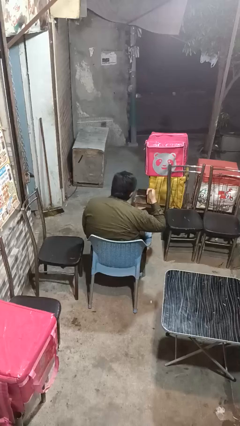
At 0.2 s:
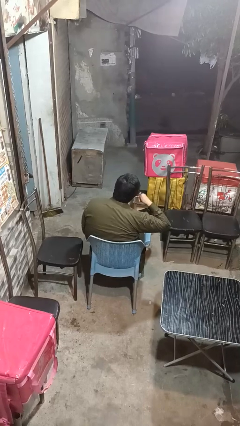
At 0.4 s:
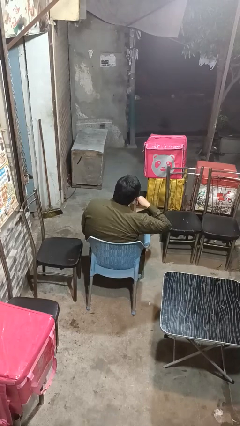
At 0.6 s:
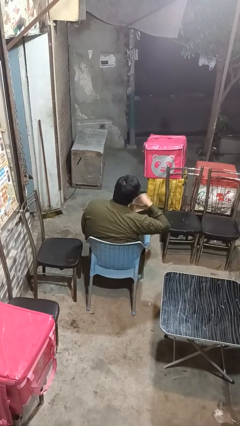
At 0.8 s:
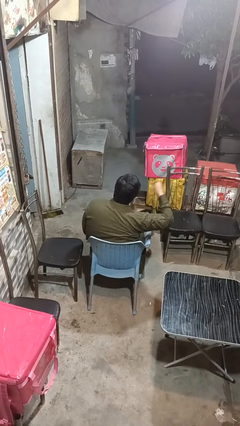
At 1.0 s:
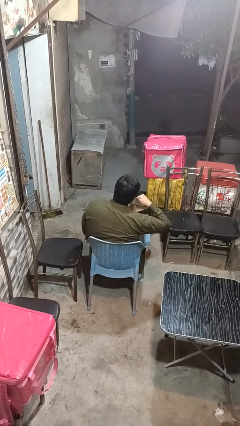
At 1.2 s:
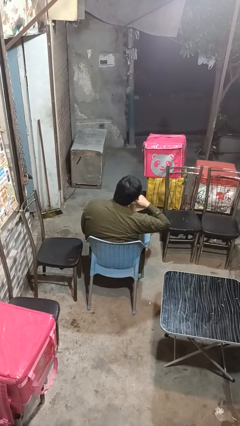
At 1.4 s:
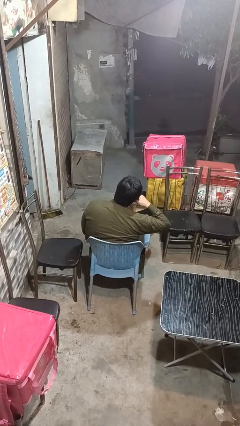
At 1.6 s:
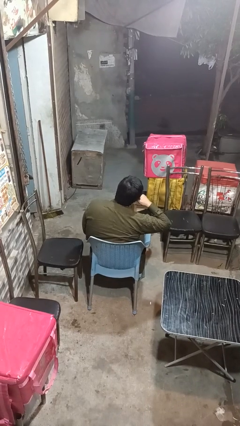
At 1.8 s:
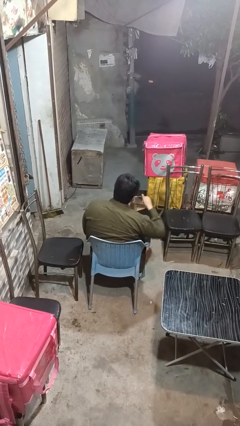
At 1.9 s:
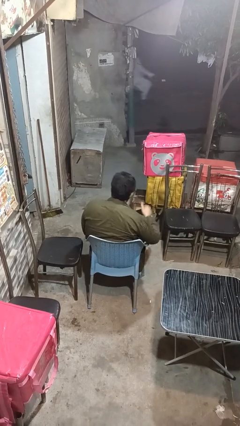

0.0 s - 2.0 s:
person gestures call me

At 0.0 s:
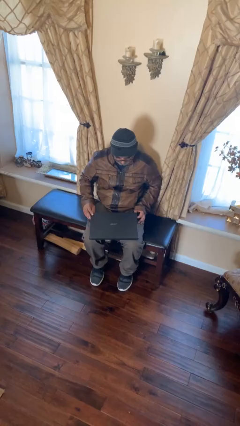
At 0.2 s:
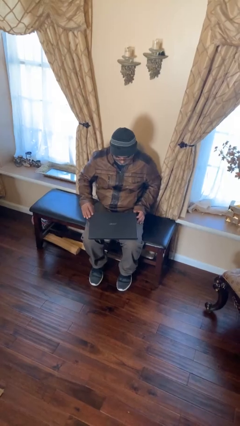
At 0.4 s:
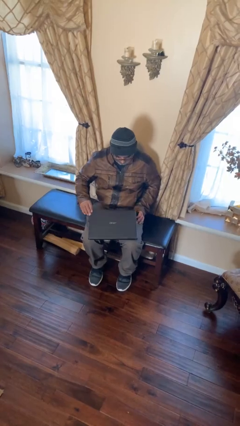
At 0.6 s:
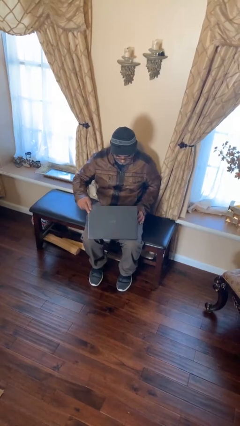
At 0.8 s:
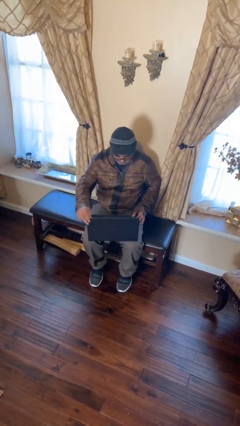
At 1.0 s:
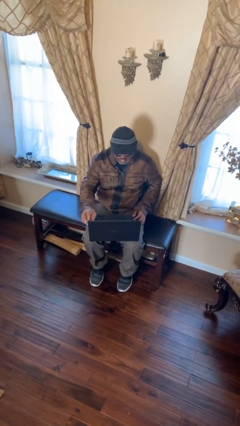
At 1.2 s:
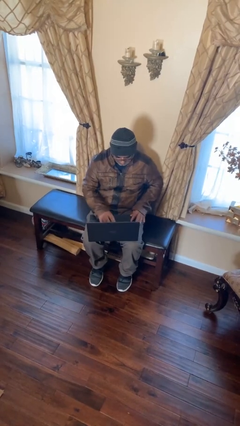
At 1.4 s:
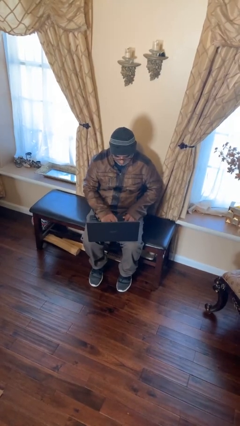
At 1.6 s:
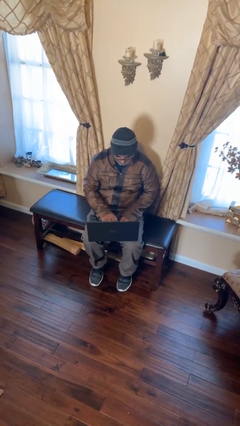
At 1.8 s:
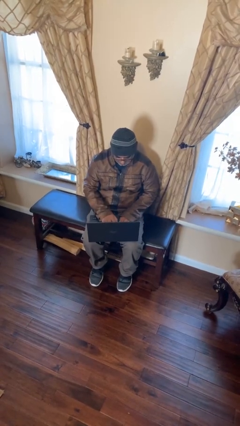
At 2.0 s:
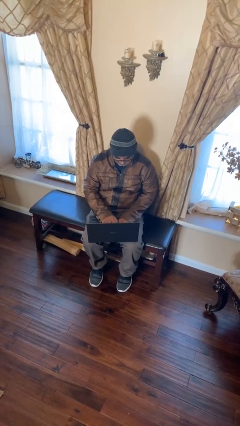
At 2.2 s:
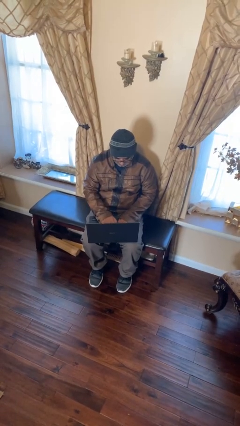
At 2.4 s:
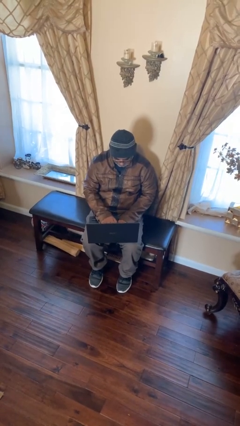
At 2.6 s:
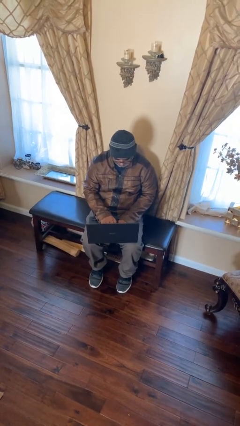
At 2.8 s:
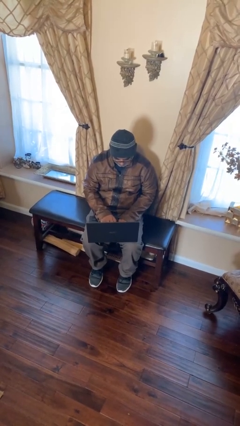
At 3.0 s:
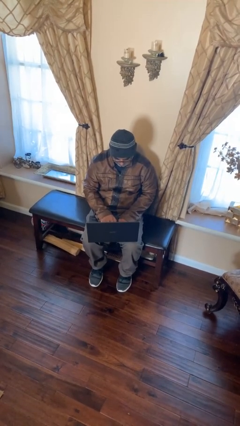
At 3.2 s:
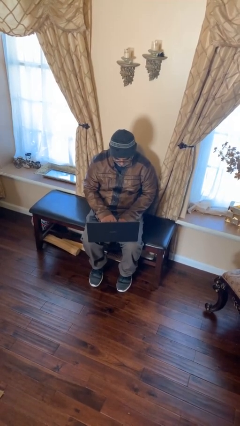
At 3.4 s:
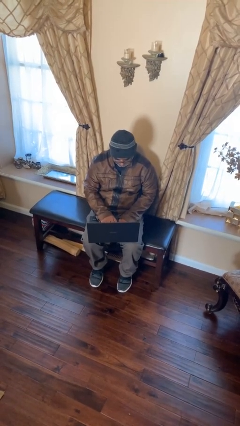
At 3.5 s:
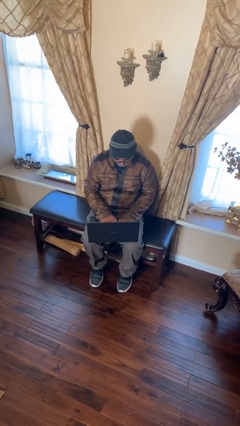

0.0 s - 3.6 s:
person interacts with laptop

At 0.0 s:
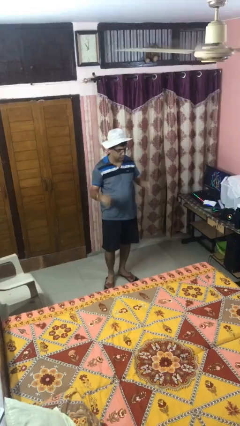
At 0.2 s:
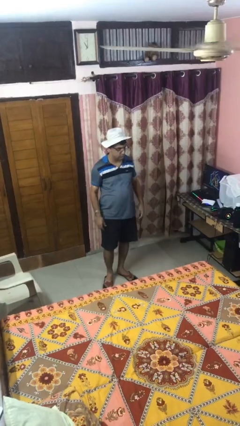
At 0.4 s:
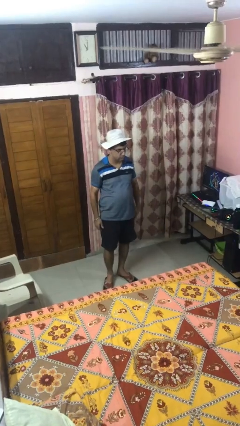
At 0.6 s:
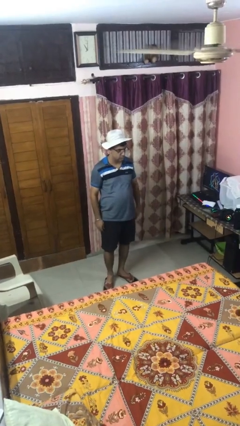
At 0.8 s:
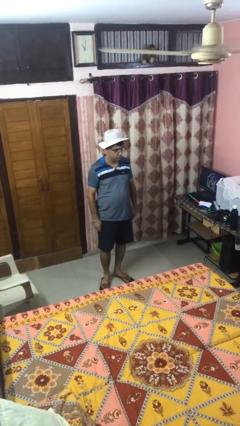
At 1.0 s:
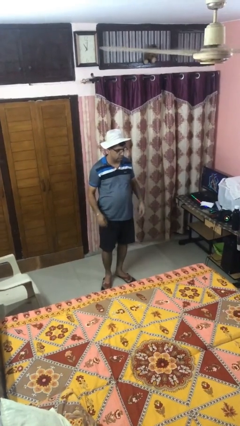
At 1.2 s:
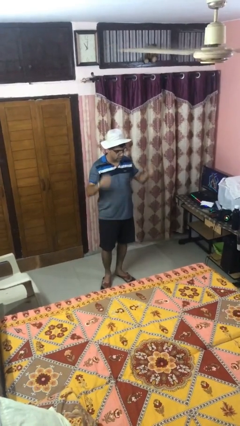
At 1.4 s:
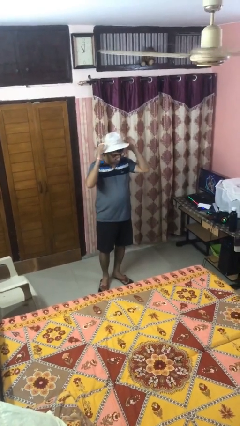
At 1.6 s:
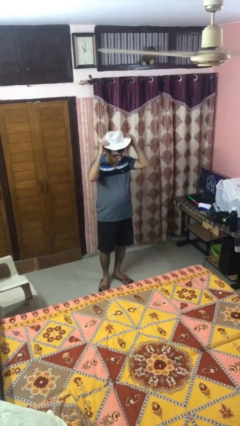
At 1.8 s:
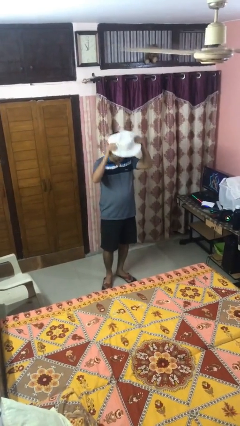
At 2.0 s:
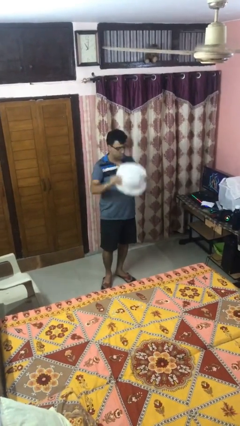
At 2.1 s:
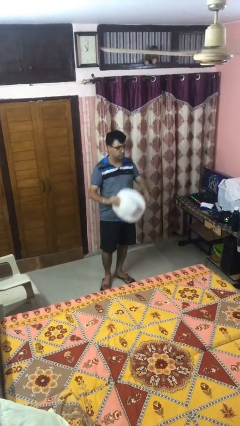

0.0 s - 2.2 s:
person takes off hat

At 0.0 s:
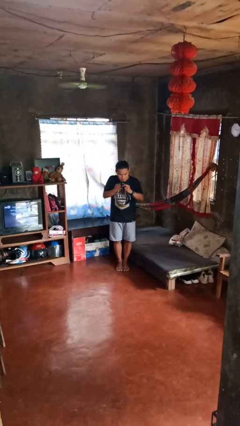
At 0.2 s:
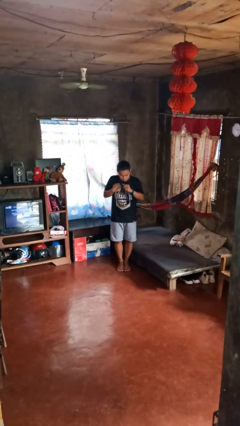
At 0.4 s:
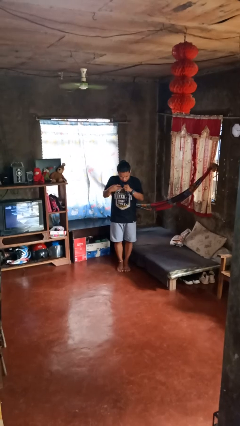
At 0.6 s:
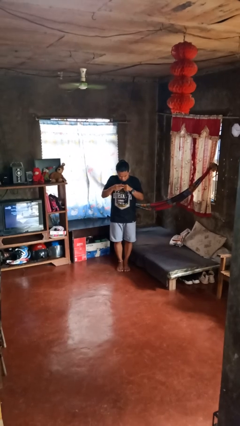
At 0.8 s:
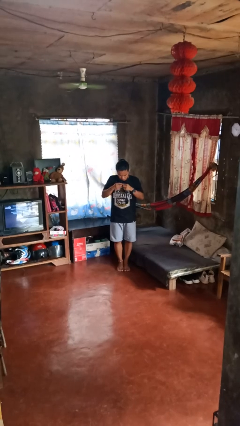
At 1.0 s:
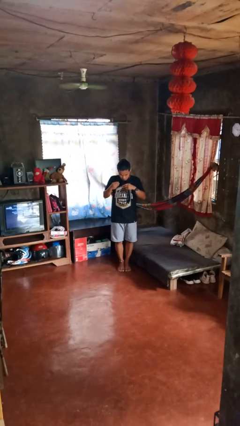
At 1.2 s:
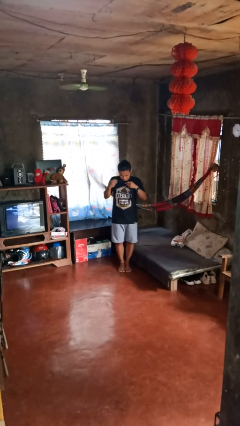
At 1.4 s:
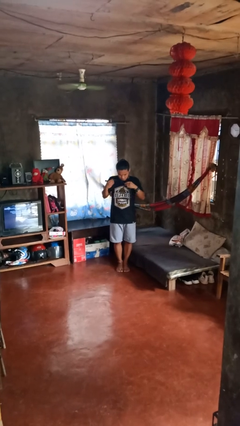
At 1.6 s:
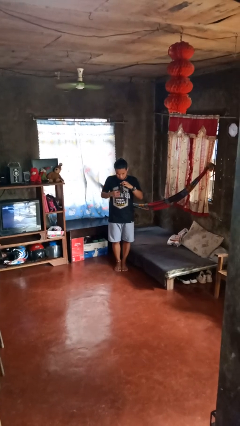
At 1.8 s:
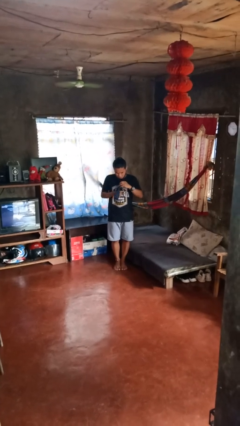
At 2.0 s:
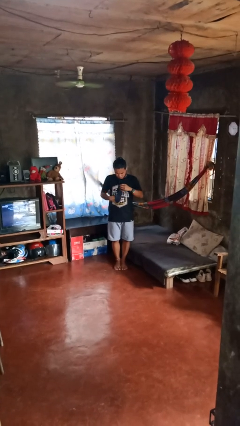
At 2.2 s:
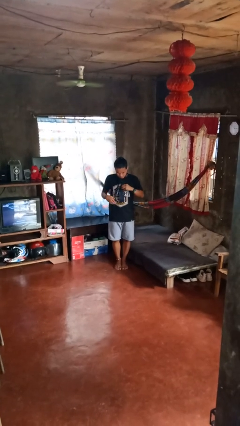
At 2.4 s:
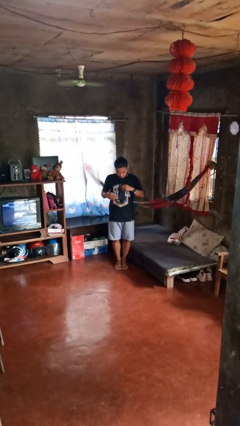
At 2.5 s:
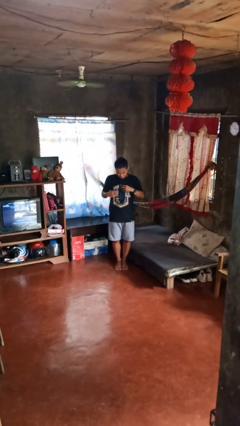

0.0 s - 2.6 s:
person dries hair with hairdryer

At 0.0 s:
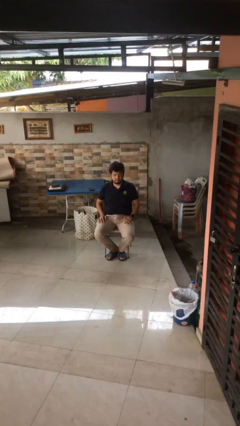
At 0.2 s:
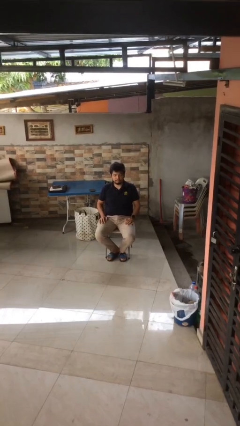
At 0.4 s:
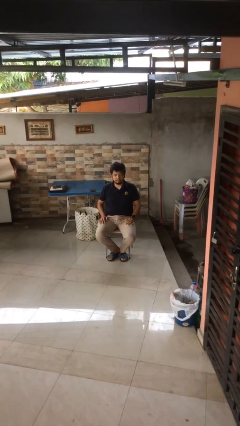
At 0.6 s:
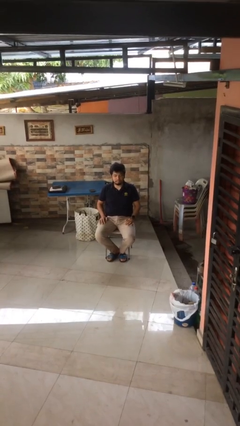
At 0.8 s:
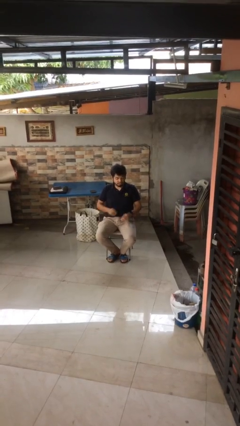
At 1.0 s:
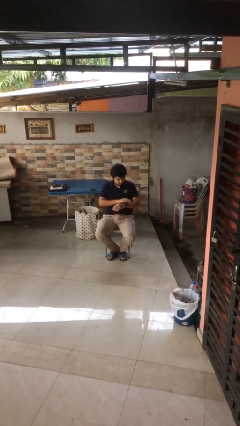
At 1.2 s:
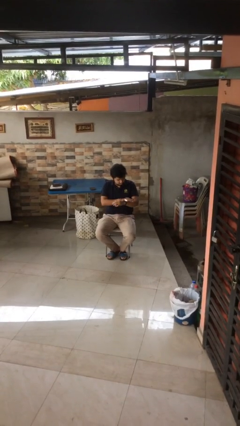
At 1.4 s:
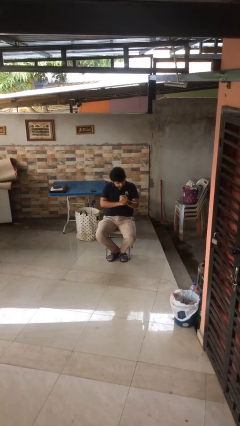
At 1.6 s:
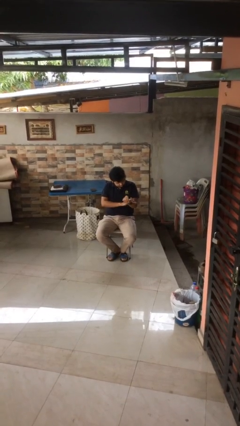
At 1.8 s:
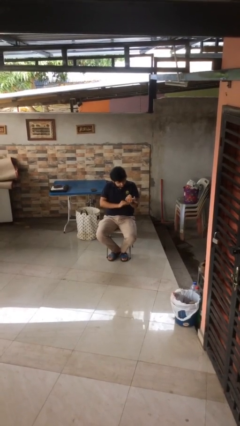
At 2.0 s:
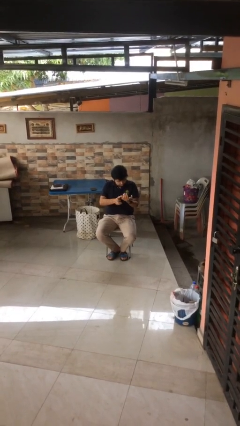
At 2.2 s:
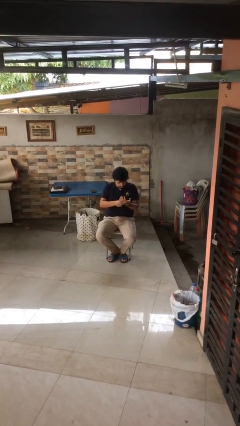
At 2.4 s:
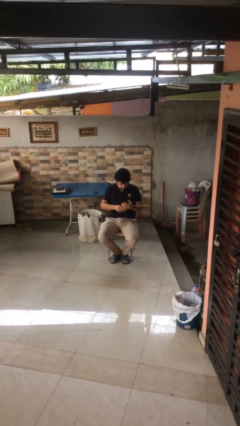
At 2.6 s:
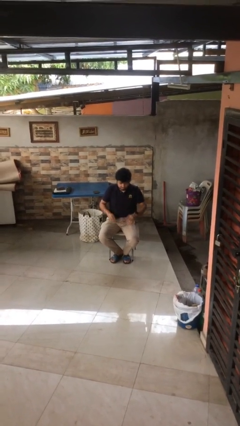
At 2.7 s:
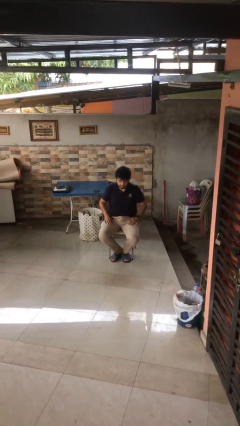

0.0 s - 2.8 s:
person looks at hands in lap

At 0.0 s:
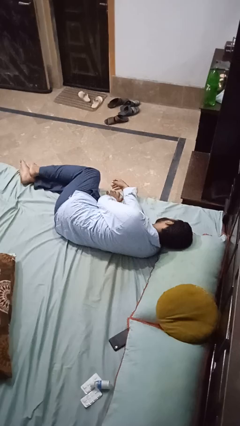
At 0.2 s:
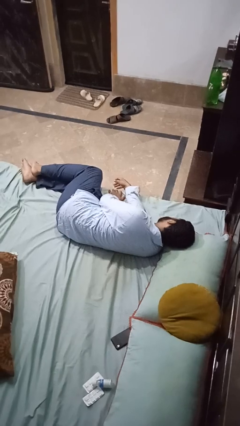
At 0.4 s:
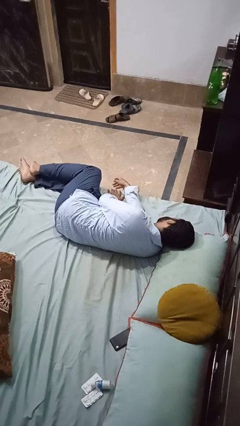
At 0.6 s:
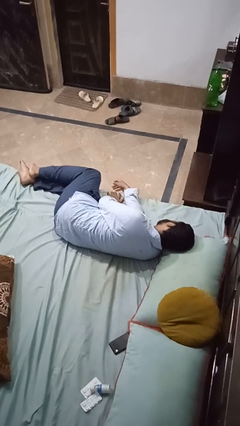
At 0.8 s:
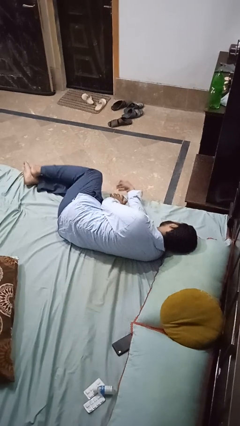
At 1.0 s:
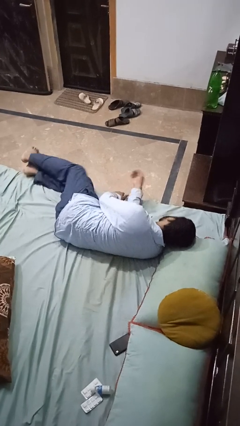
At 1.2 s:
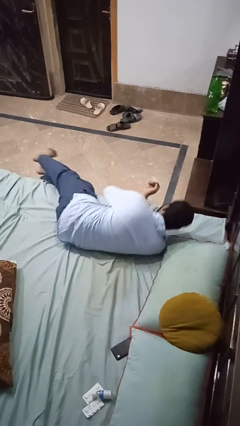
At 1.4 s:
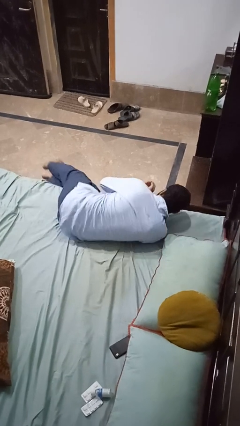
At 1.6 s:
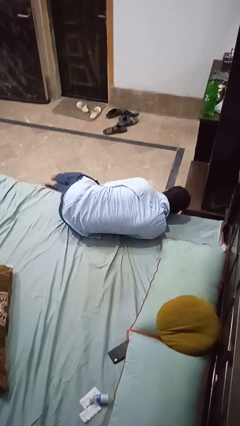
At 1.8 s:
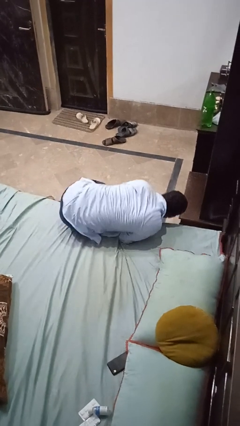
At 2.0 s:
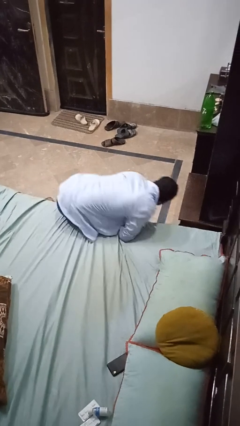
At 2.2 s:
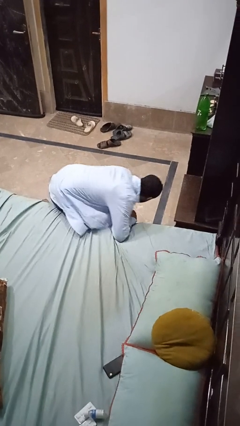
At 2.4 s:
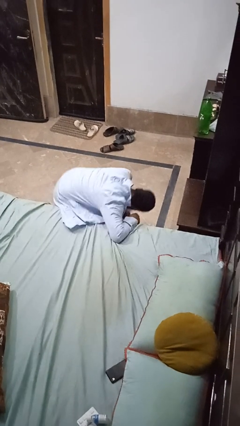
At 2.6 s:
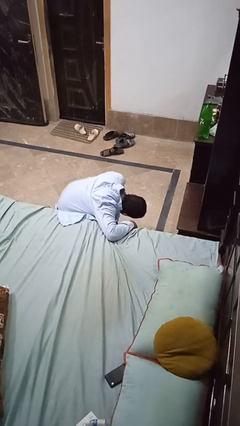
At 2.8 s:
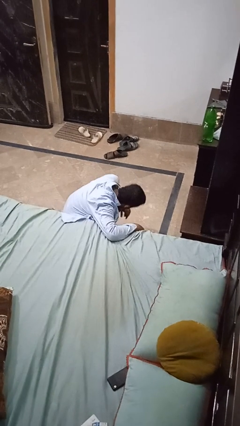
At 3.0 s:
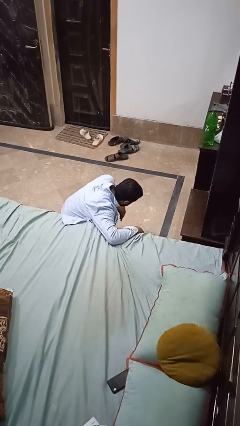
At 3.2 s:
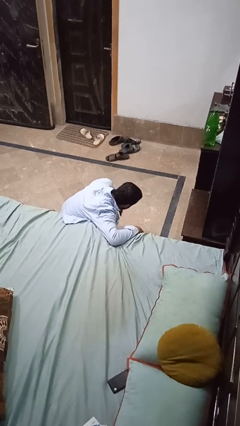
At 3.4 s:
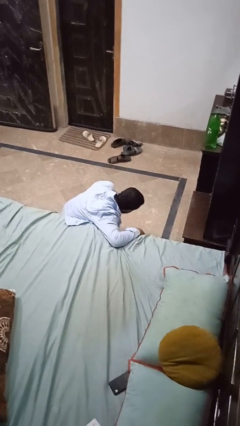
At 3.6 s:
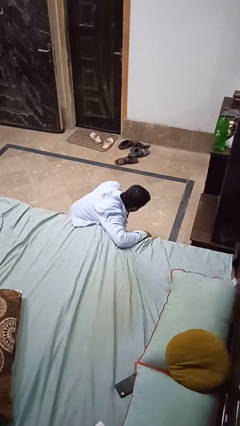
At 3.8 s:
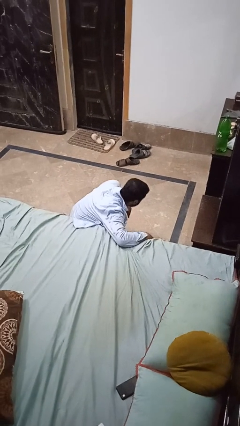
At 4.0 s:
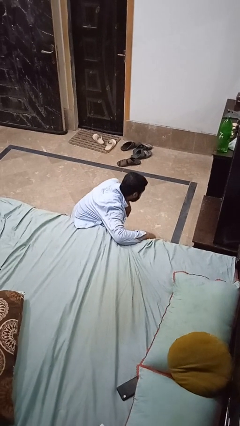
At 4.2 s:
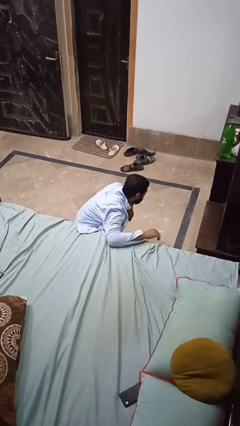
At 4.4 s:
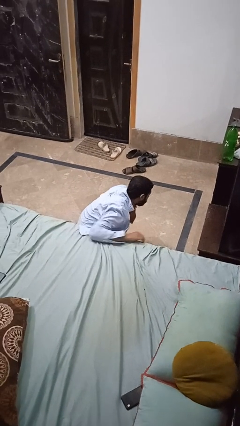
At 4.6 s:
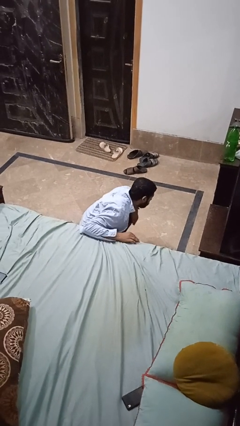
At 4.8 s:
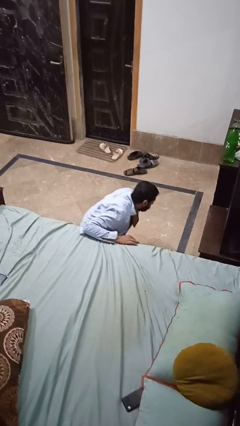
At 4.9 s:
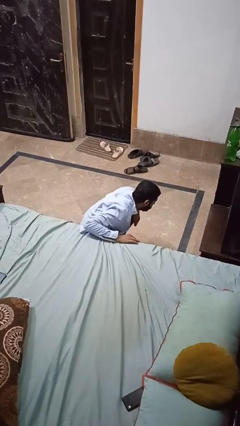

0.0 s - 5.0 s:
person falls from bed
